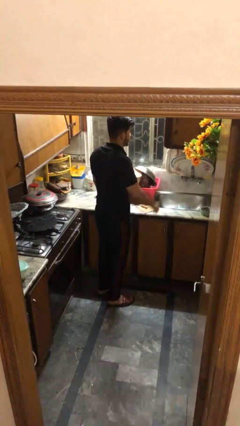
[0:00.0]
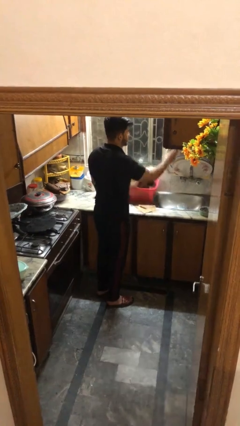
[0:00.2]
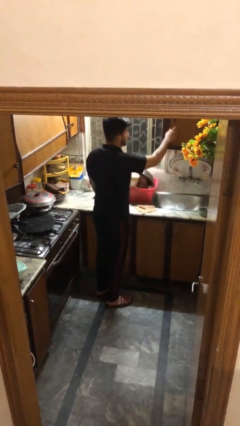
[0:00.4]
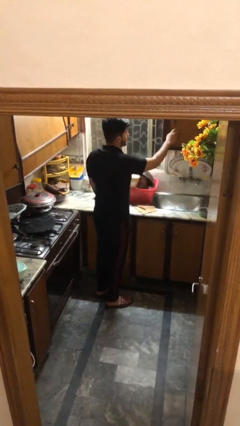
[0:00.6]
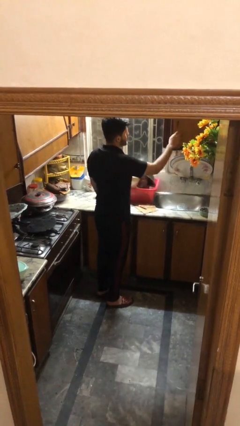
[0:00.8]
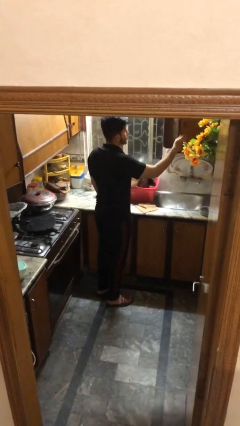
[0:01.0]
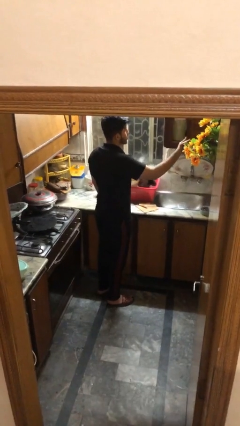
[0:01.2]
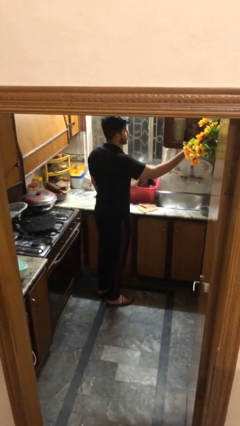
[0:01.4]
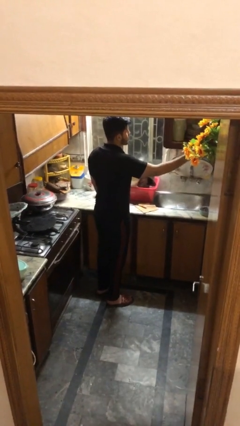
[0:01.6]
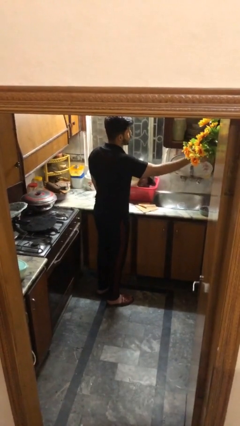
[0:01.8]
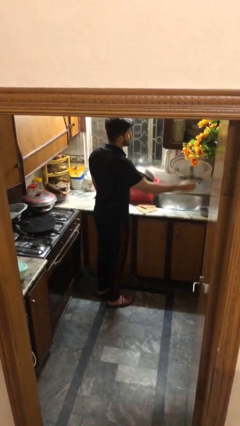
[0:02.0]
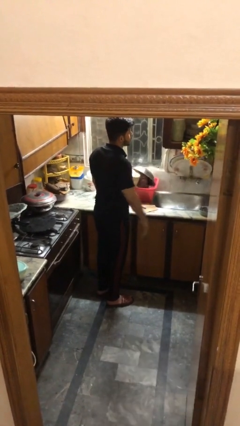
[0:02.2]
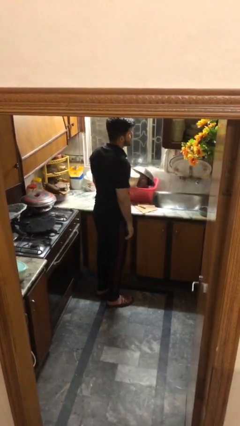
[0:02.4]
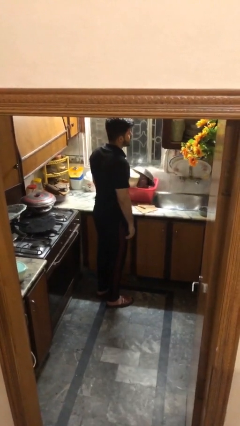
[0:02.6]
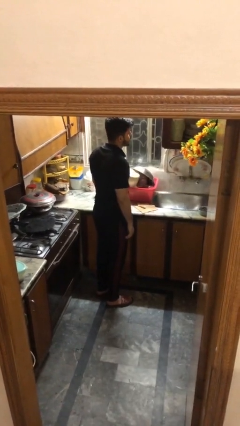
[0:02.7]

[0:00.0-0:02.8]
person opens kitchen drawer

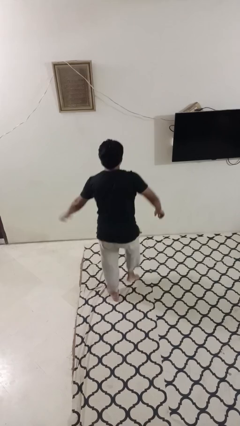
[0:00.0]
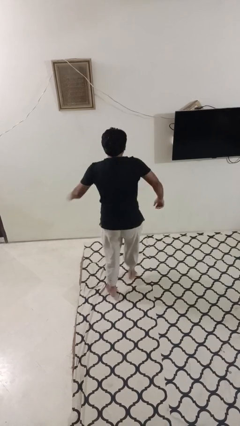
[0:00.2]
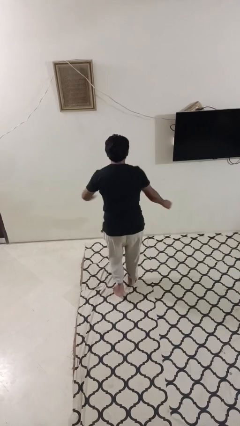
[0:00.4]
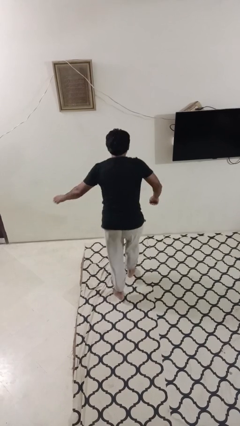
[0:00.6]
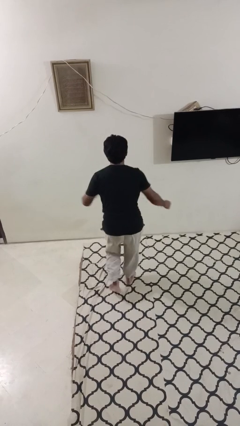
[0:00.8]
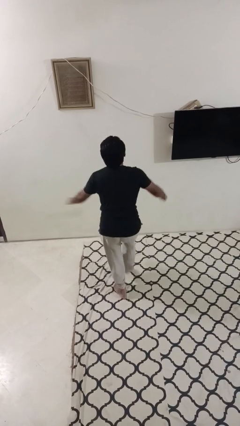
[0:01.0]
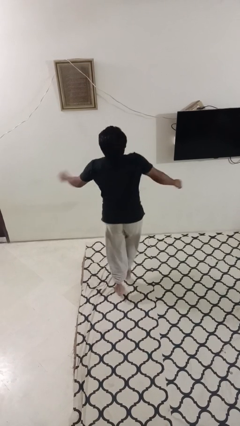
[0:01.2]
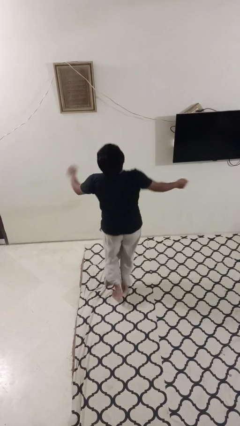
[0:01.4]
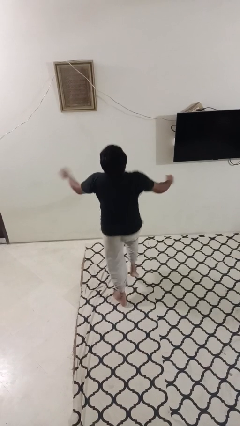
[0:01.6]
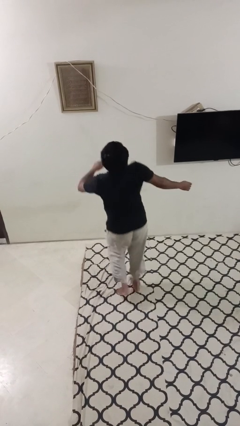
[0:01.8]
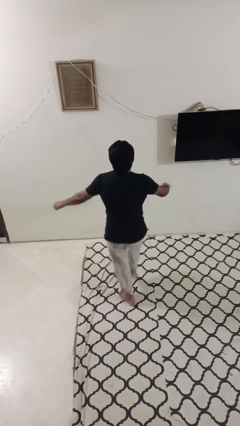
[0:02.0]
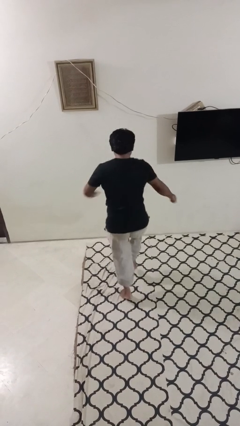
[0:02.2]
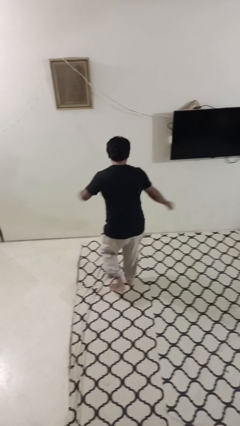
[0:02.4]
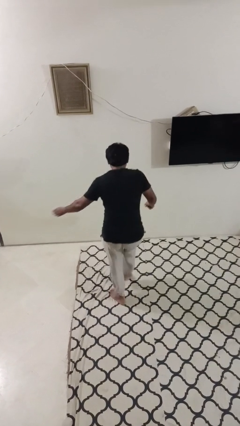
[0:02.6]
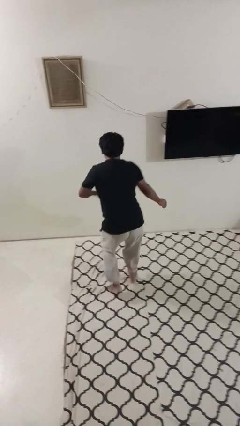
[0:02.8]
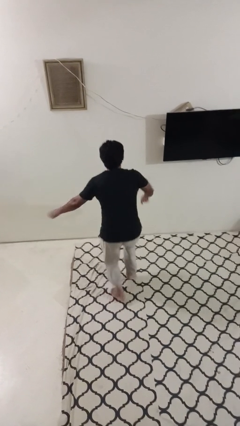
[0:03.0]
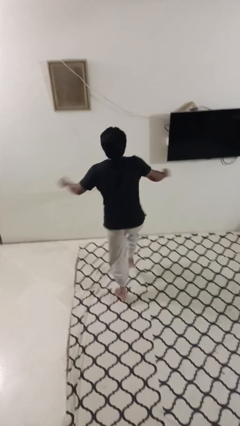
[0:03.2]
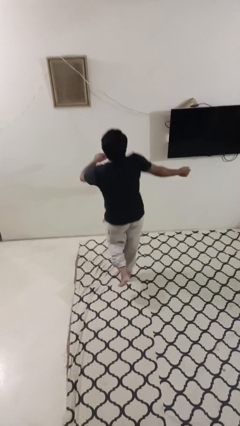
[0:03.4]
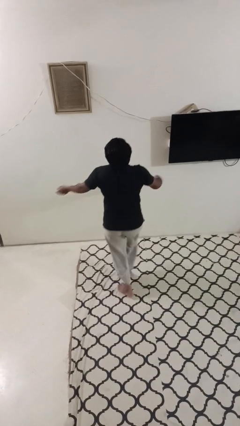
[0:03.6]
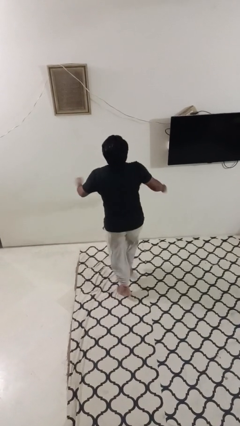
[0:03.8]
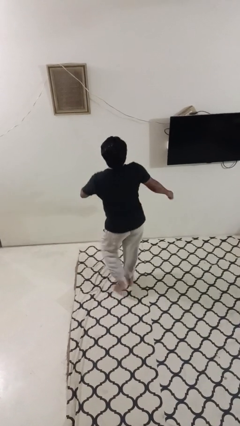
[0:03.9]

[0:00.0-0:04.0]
person dances in place

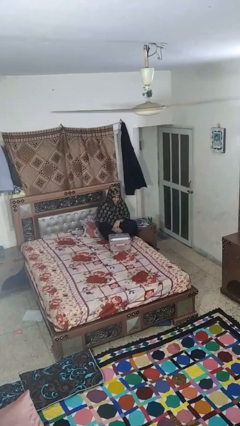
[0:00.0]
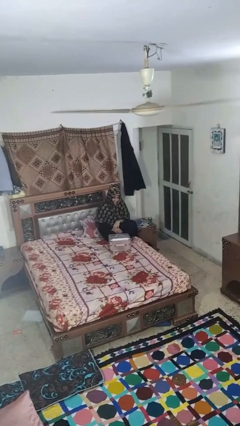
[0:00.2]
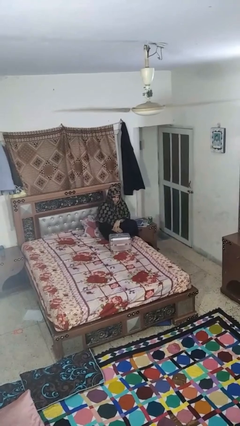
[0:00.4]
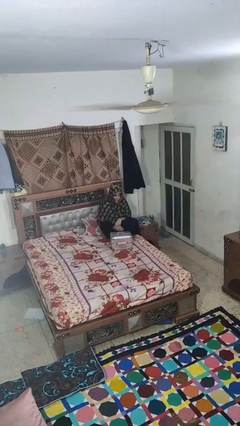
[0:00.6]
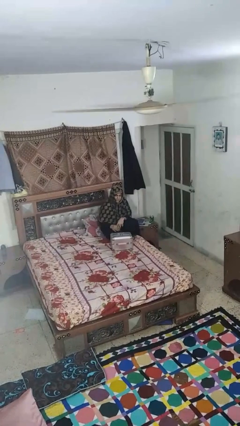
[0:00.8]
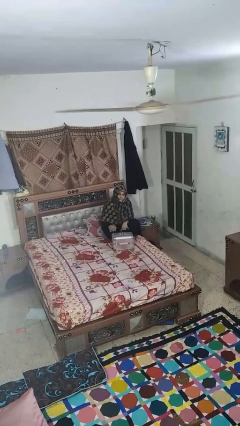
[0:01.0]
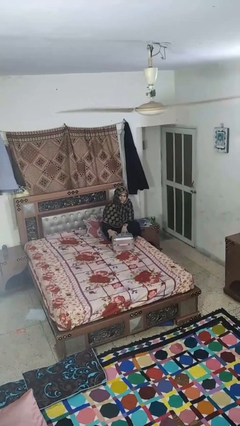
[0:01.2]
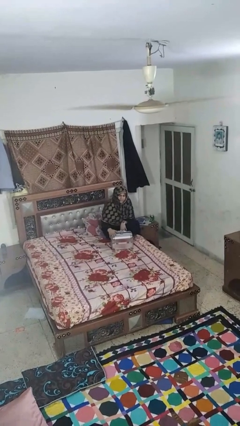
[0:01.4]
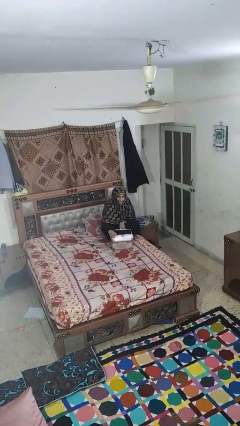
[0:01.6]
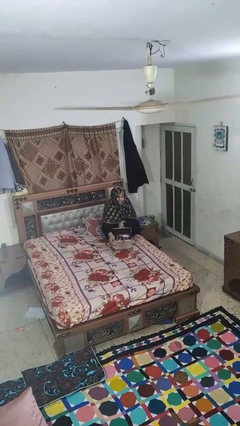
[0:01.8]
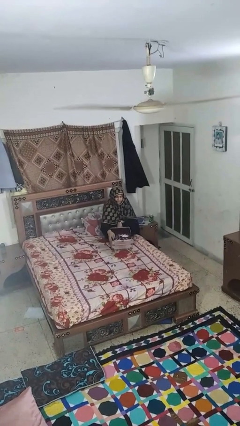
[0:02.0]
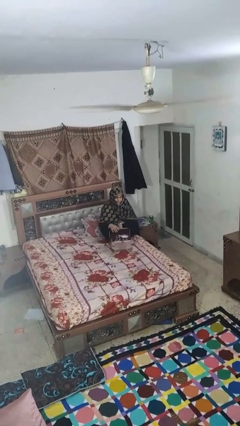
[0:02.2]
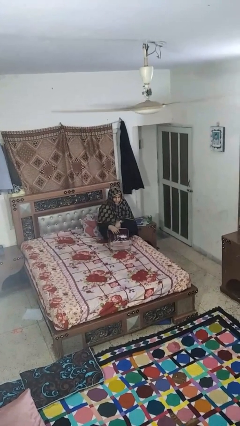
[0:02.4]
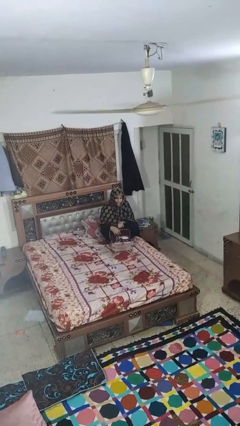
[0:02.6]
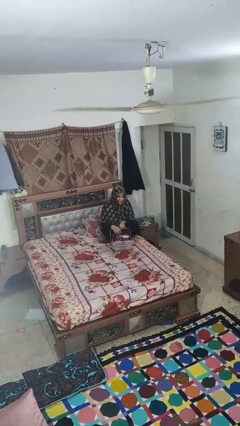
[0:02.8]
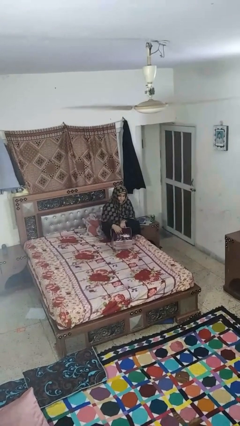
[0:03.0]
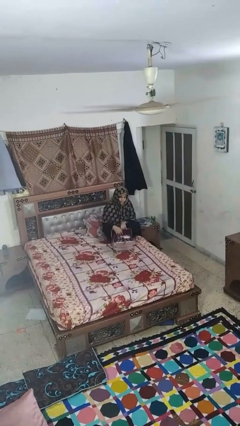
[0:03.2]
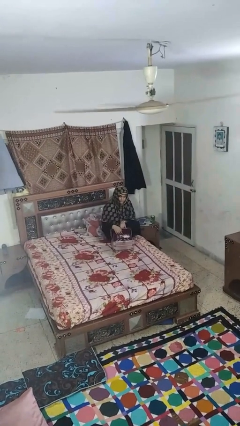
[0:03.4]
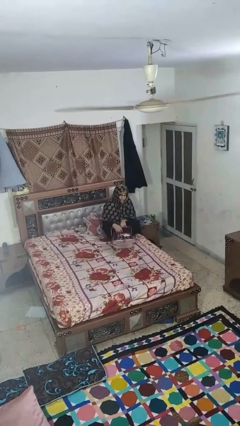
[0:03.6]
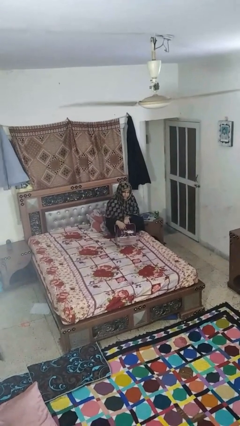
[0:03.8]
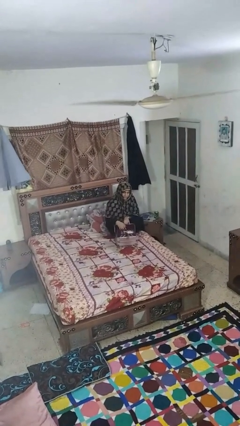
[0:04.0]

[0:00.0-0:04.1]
person opens jewelry box

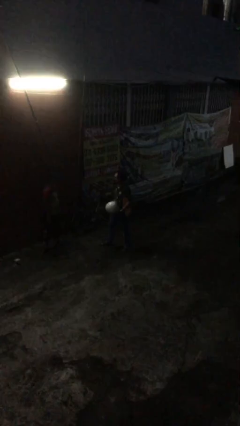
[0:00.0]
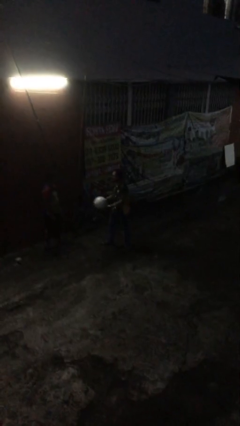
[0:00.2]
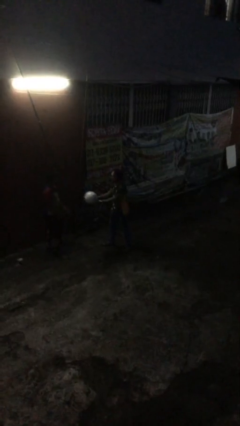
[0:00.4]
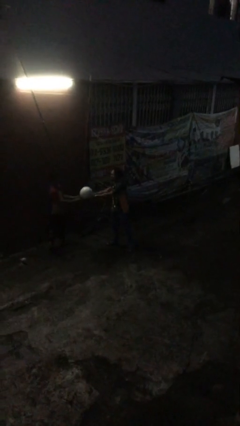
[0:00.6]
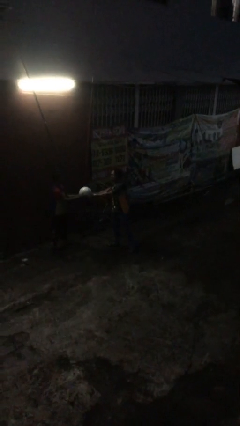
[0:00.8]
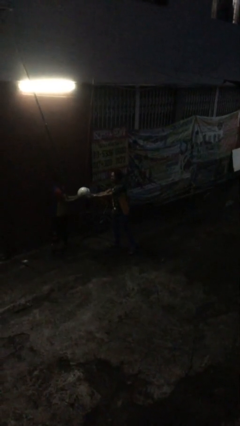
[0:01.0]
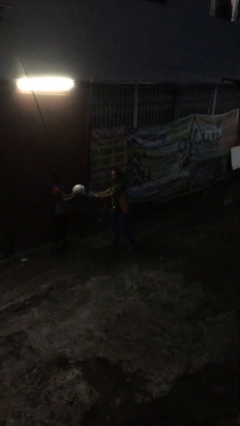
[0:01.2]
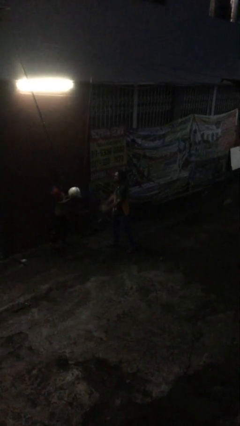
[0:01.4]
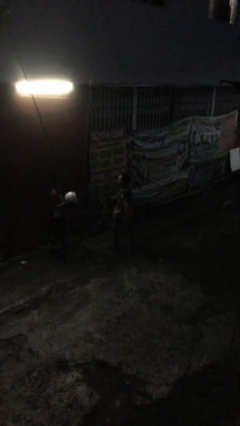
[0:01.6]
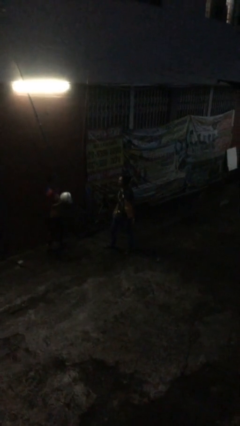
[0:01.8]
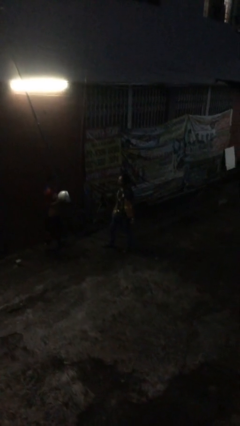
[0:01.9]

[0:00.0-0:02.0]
person transfers object to person

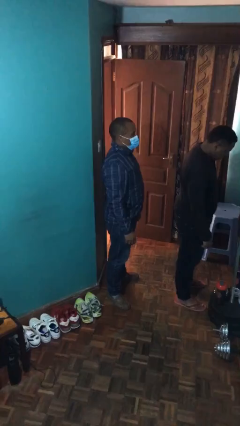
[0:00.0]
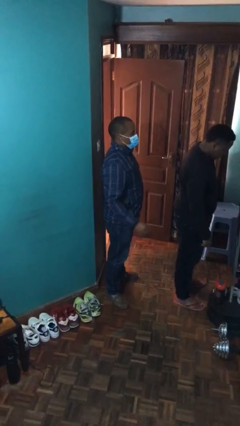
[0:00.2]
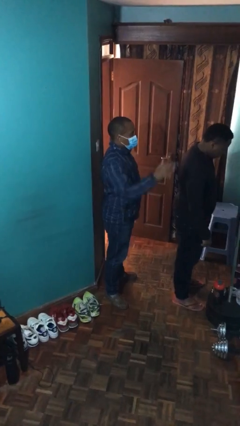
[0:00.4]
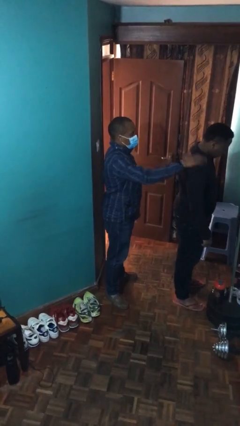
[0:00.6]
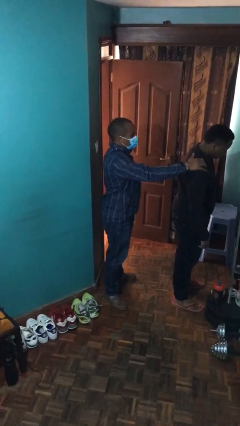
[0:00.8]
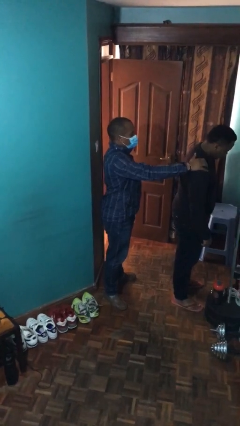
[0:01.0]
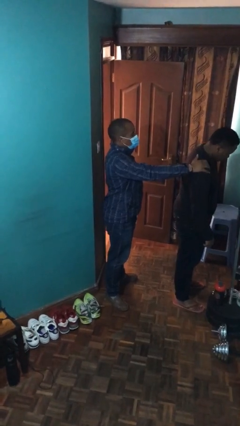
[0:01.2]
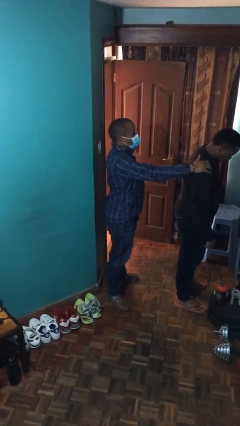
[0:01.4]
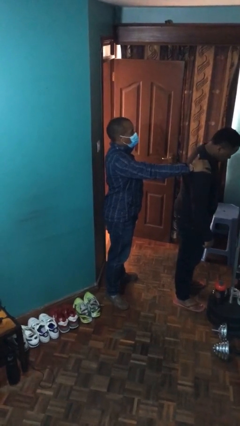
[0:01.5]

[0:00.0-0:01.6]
person grabs person by shoulder

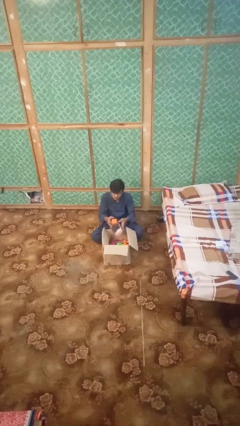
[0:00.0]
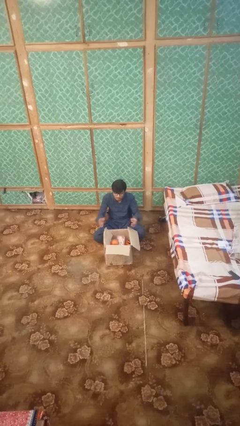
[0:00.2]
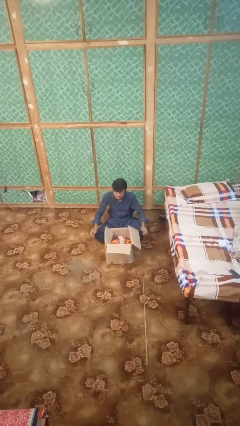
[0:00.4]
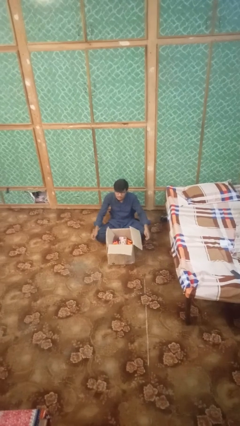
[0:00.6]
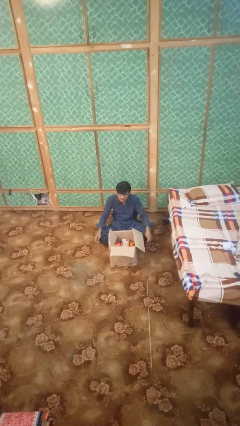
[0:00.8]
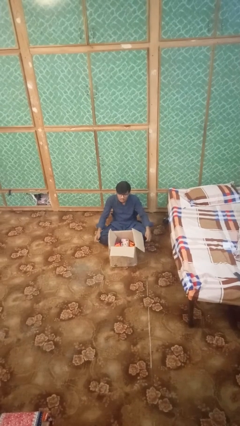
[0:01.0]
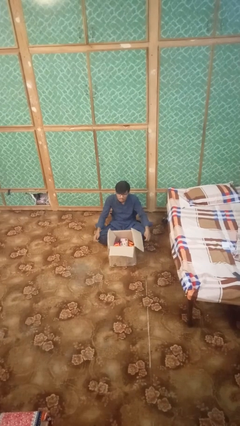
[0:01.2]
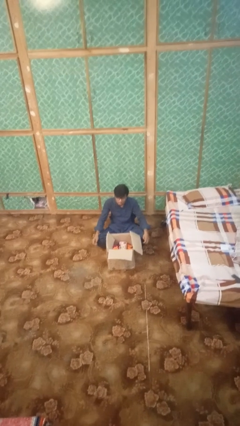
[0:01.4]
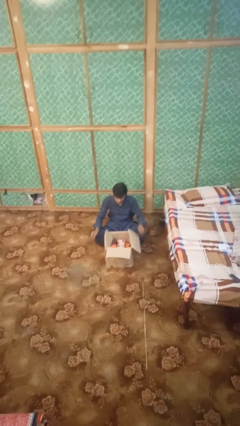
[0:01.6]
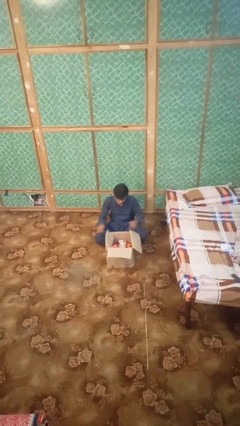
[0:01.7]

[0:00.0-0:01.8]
person puts object into box

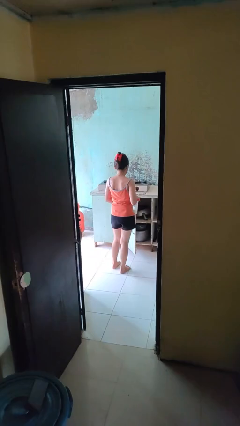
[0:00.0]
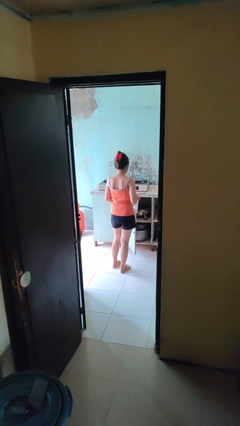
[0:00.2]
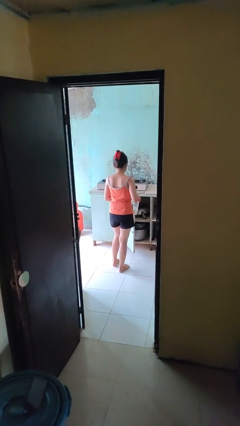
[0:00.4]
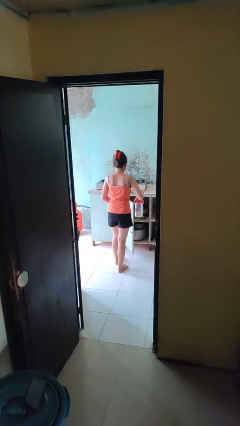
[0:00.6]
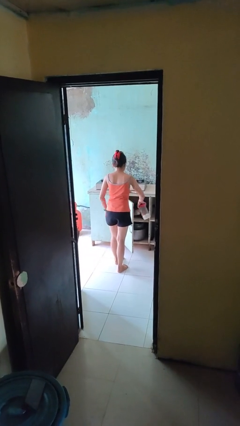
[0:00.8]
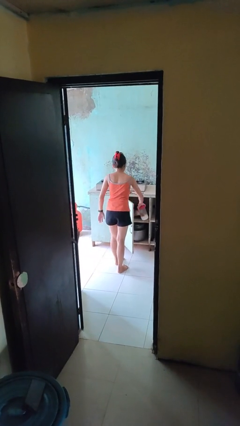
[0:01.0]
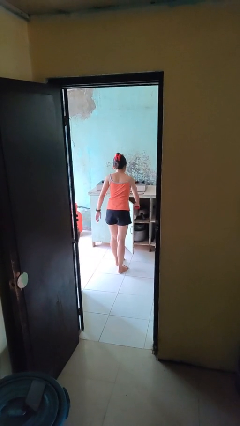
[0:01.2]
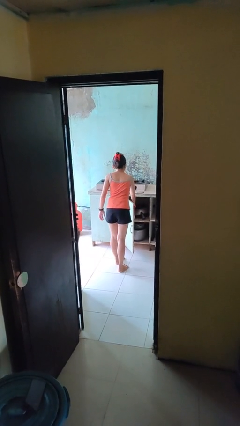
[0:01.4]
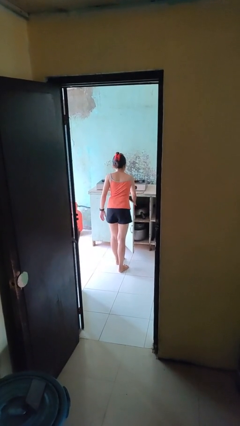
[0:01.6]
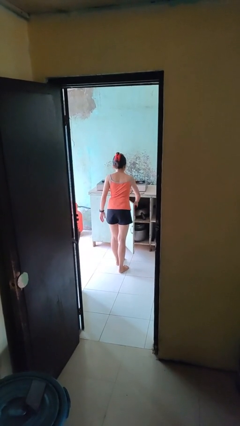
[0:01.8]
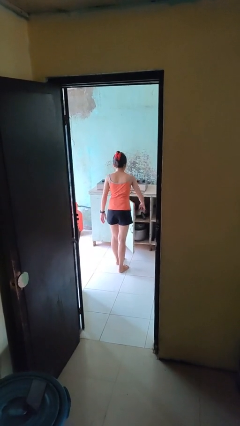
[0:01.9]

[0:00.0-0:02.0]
person puts down object into cabinet
